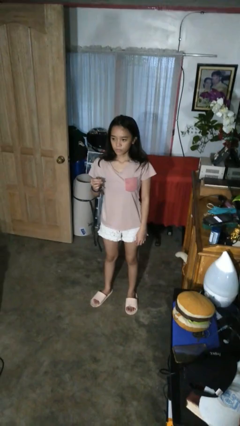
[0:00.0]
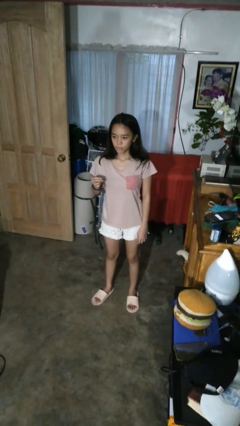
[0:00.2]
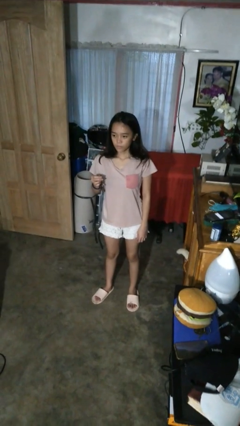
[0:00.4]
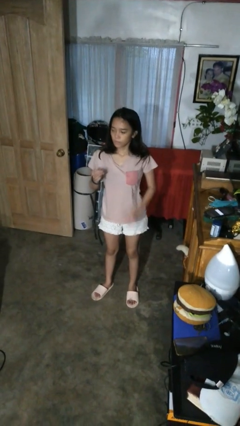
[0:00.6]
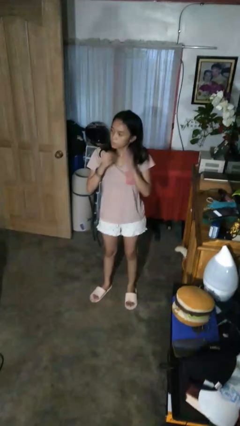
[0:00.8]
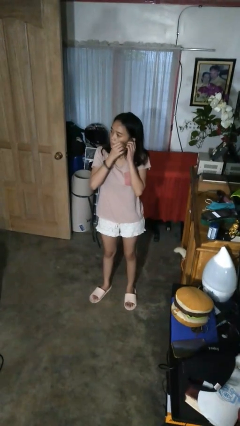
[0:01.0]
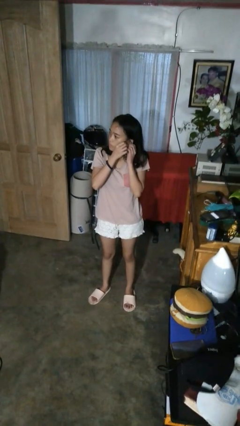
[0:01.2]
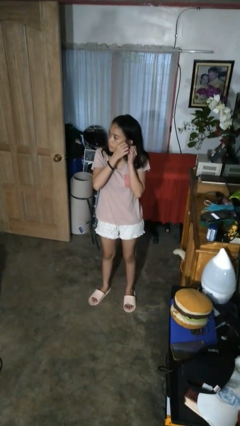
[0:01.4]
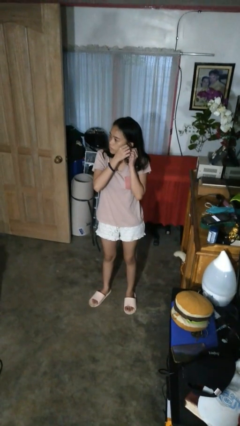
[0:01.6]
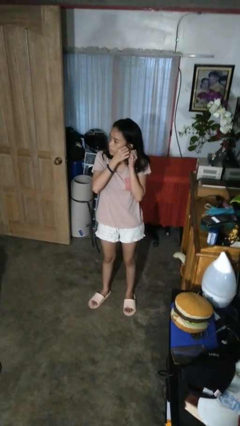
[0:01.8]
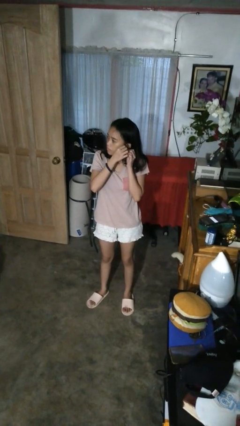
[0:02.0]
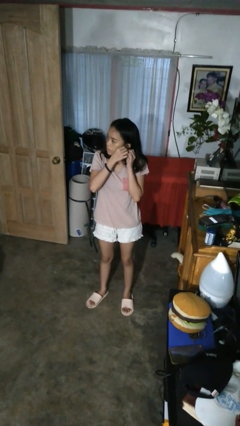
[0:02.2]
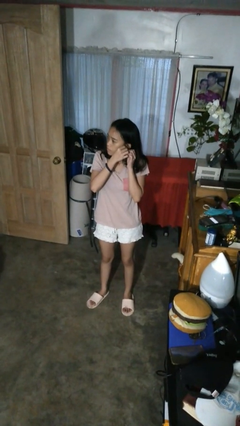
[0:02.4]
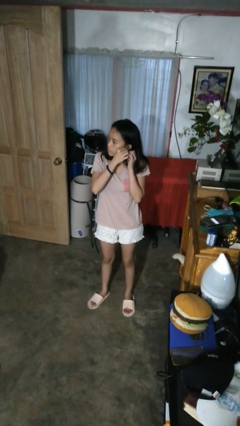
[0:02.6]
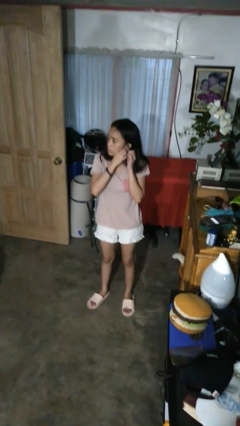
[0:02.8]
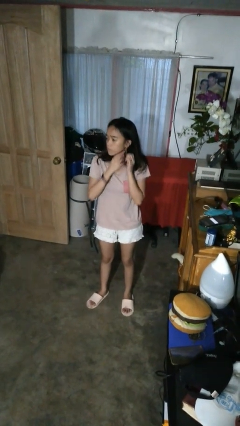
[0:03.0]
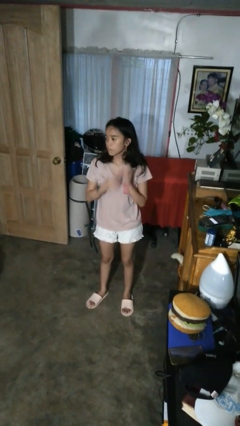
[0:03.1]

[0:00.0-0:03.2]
person puts on earrings

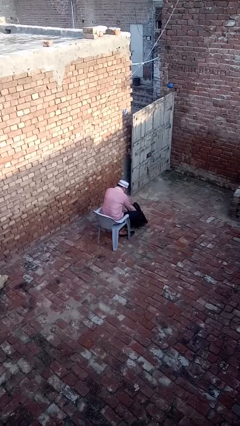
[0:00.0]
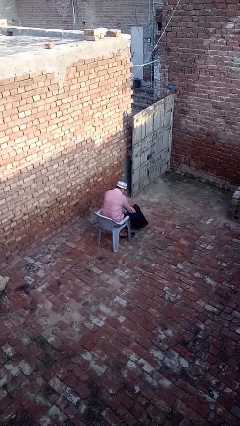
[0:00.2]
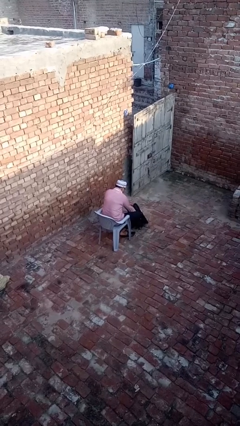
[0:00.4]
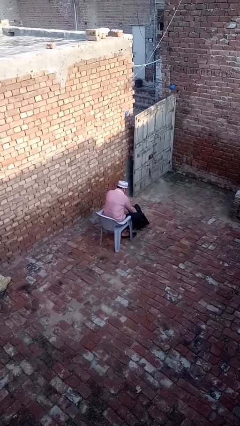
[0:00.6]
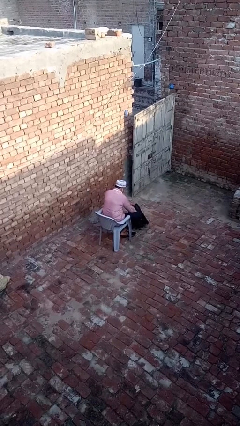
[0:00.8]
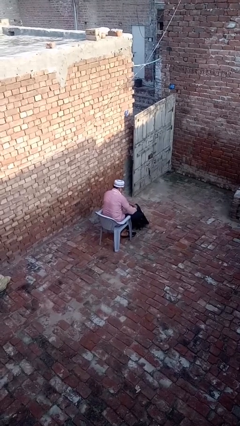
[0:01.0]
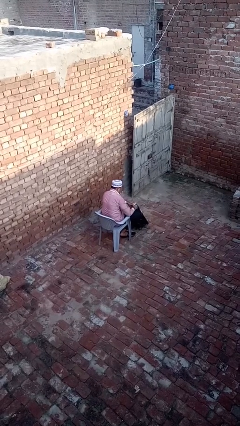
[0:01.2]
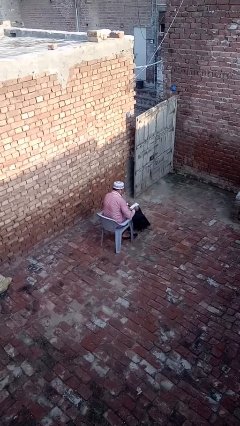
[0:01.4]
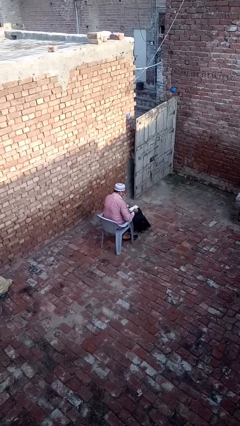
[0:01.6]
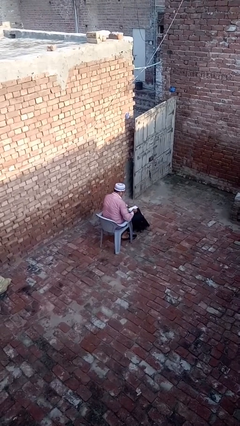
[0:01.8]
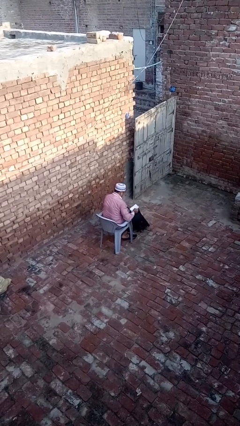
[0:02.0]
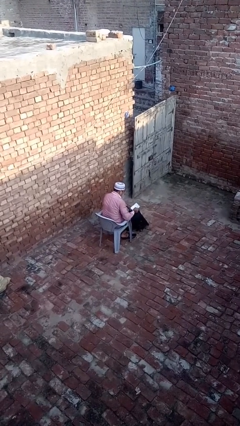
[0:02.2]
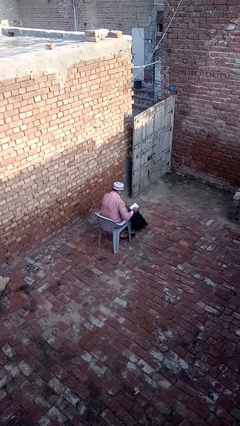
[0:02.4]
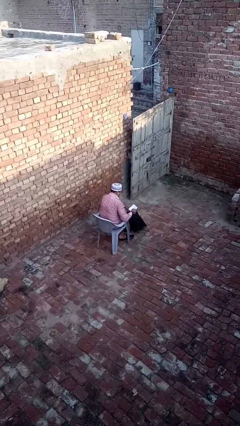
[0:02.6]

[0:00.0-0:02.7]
person takes object from backpack

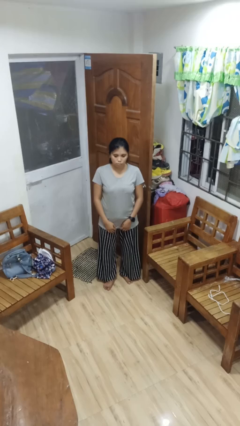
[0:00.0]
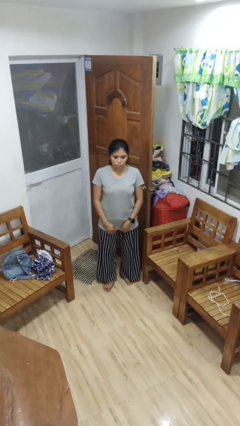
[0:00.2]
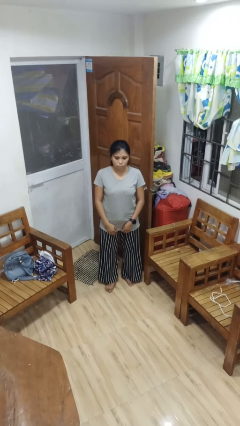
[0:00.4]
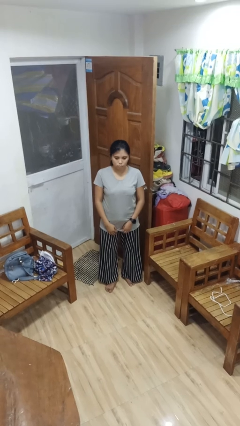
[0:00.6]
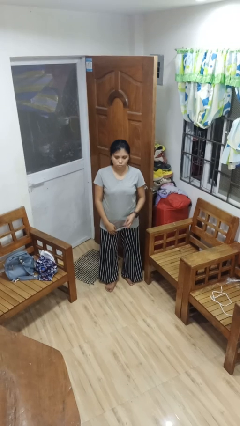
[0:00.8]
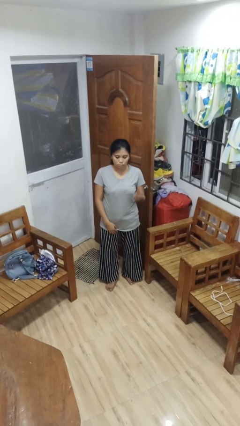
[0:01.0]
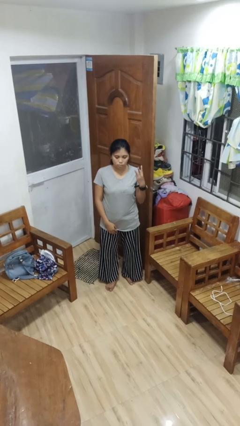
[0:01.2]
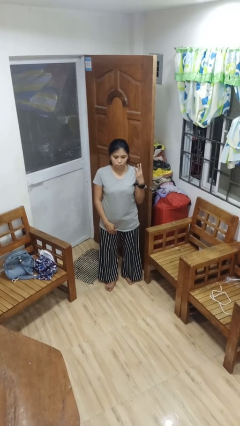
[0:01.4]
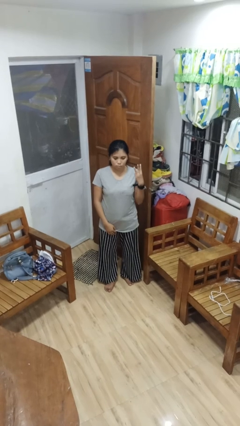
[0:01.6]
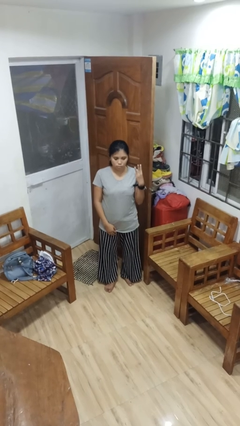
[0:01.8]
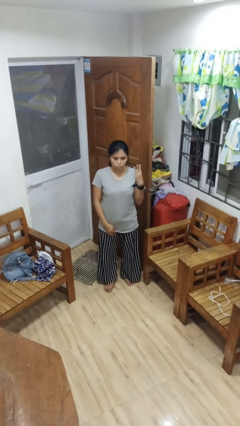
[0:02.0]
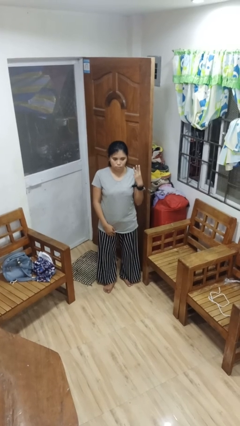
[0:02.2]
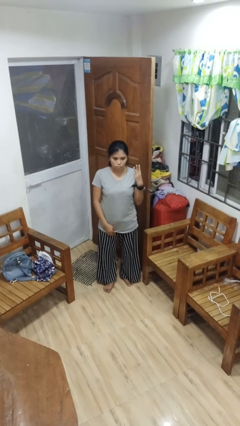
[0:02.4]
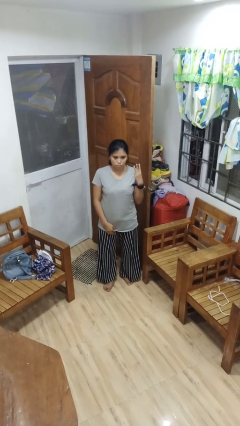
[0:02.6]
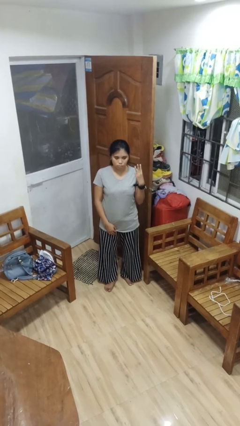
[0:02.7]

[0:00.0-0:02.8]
person gestures number three

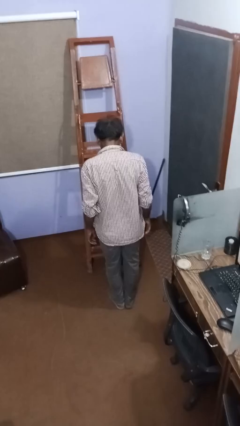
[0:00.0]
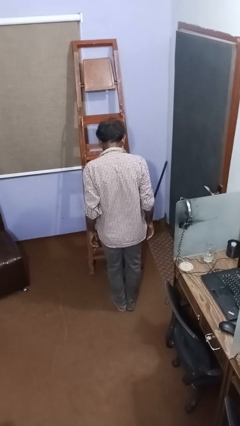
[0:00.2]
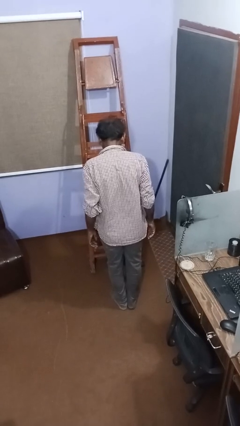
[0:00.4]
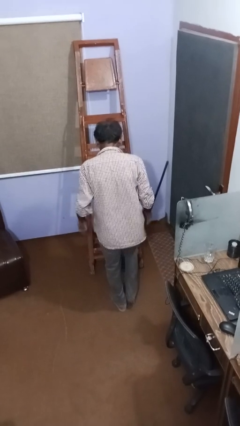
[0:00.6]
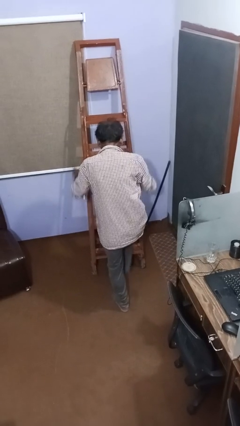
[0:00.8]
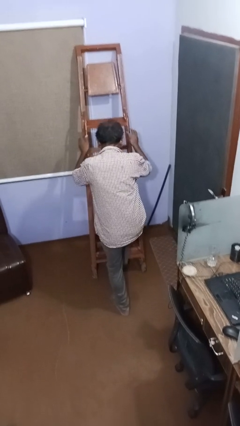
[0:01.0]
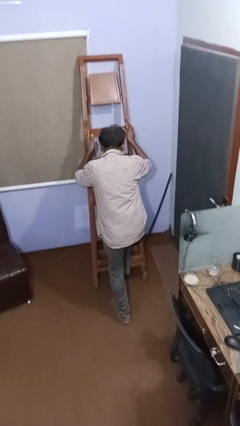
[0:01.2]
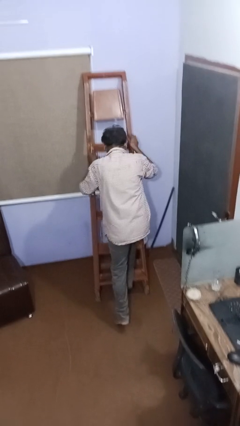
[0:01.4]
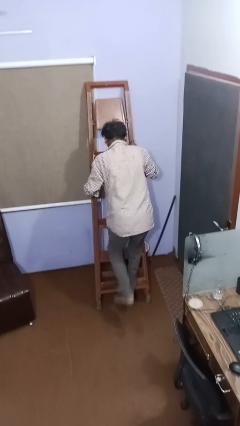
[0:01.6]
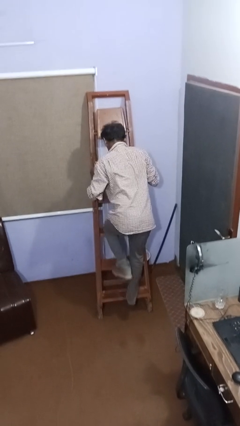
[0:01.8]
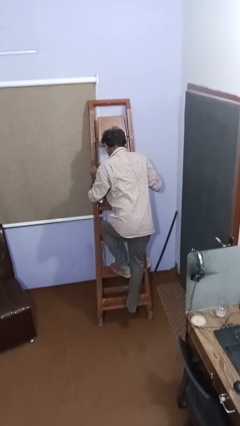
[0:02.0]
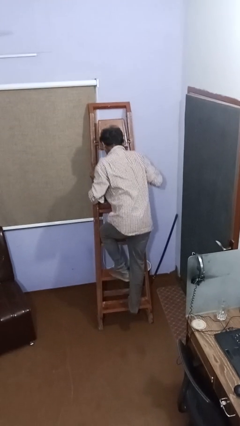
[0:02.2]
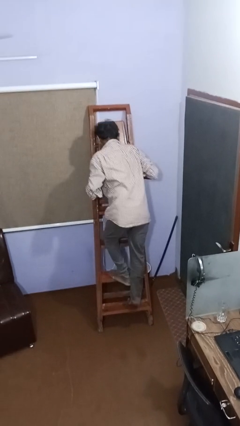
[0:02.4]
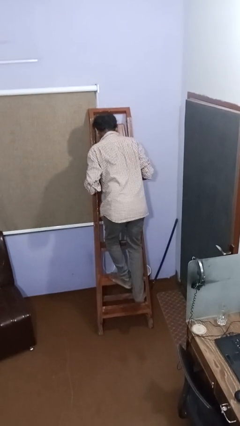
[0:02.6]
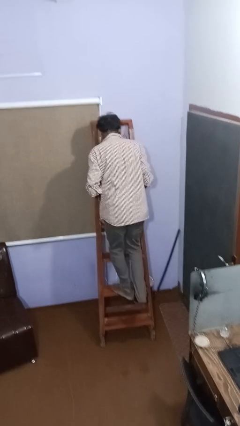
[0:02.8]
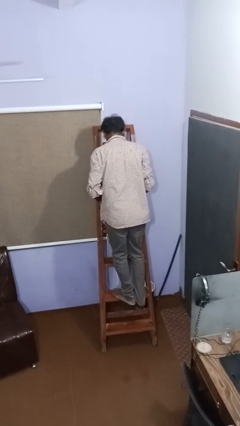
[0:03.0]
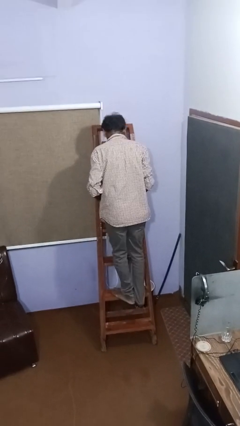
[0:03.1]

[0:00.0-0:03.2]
person climbs up ladder

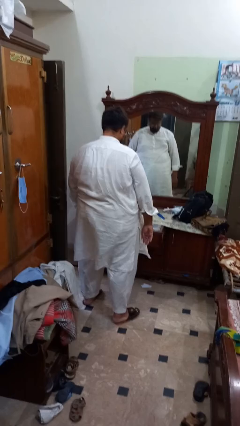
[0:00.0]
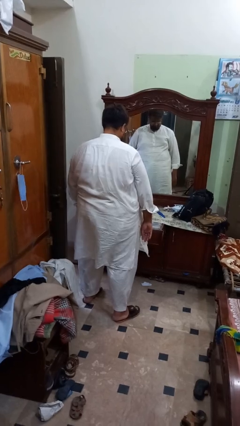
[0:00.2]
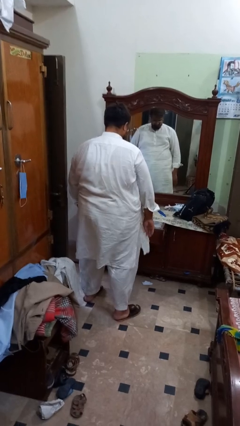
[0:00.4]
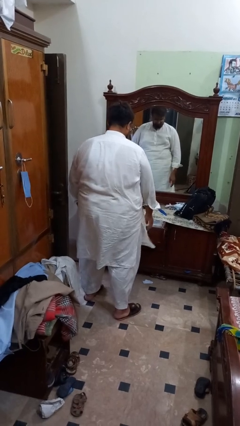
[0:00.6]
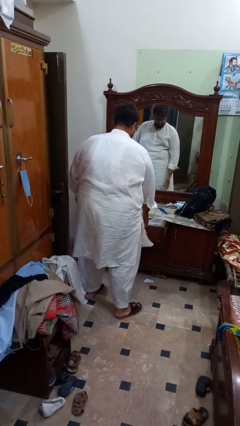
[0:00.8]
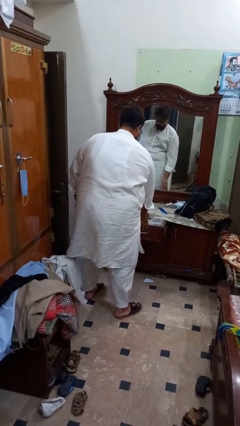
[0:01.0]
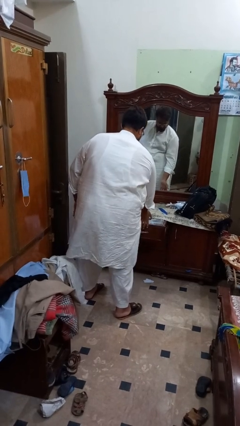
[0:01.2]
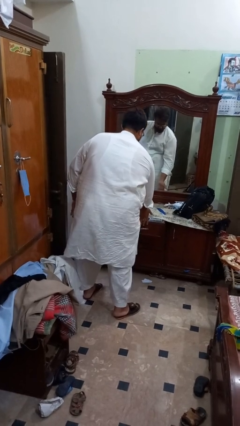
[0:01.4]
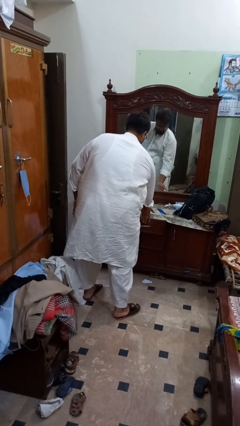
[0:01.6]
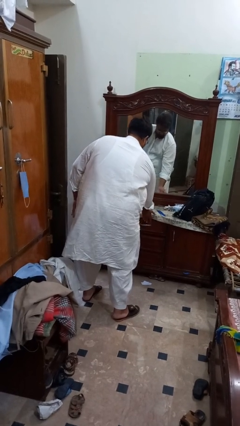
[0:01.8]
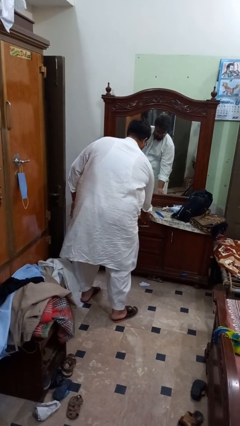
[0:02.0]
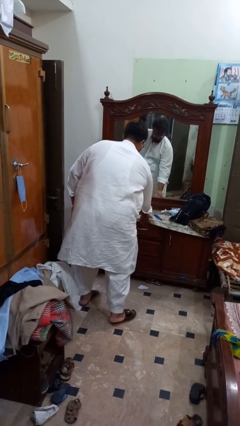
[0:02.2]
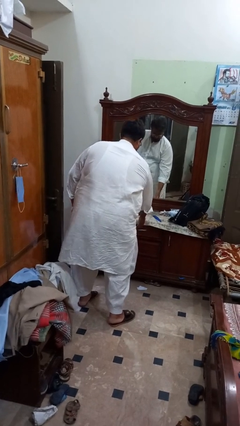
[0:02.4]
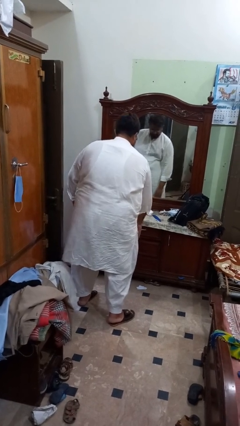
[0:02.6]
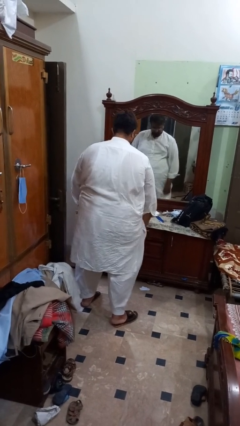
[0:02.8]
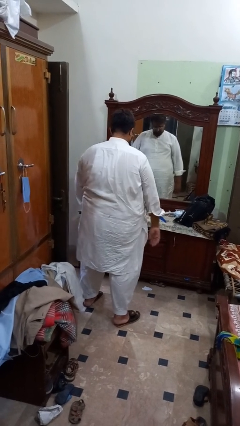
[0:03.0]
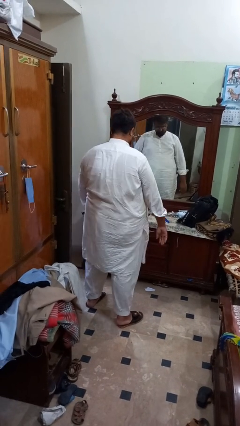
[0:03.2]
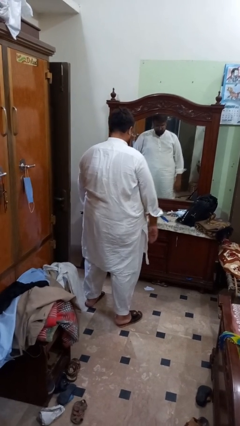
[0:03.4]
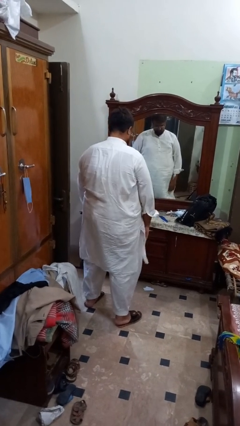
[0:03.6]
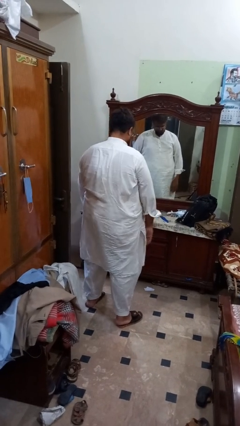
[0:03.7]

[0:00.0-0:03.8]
person closes dresser drawer

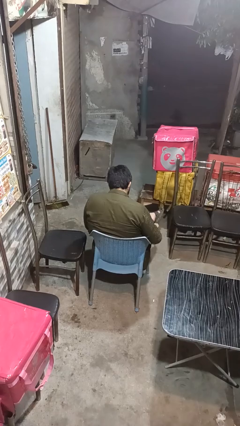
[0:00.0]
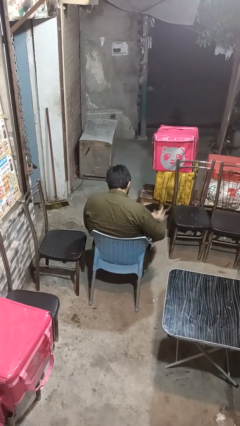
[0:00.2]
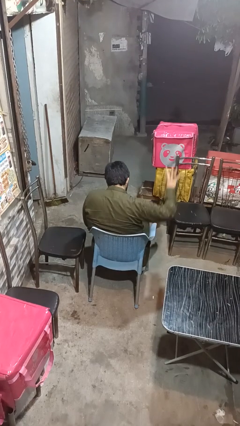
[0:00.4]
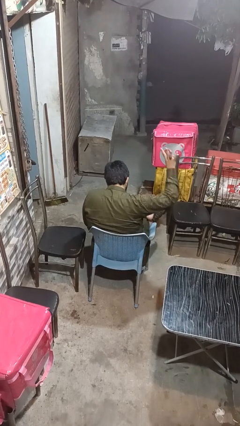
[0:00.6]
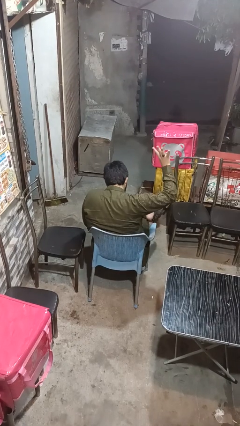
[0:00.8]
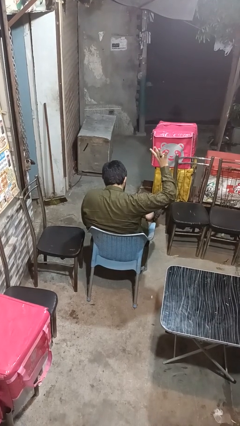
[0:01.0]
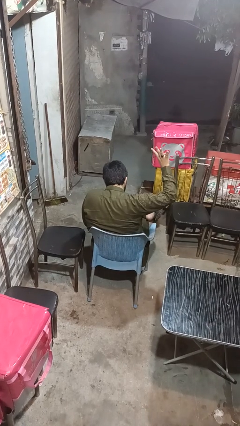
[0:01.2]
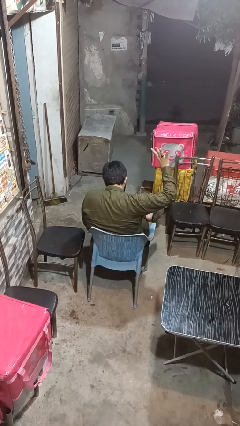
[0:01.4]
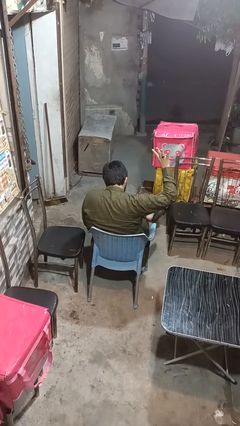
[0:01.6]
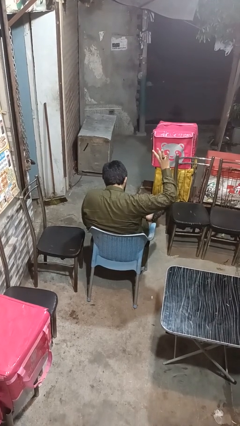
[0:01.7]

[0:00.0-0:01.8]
person gestures number four
